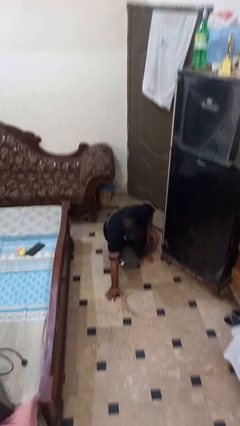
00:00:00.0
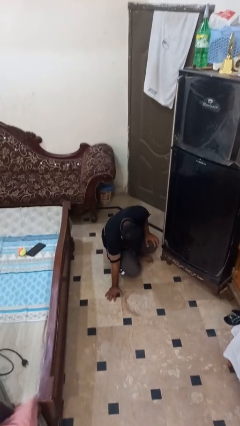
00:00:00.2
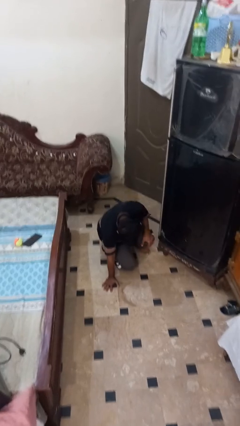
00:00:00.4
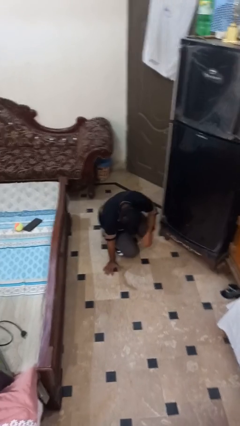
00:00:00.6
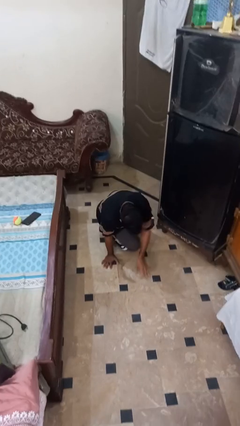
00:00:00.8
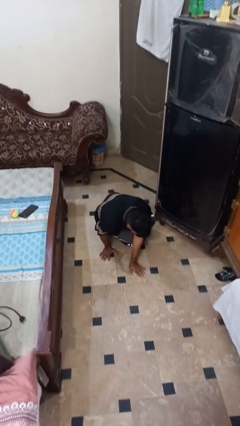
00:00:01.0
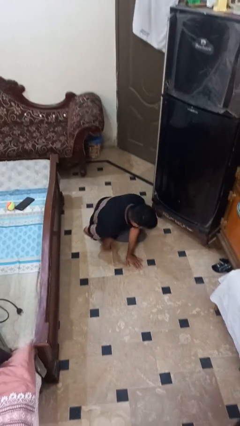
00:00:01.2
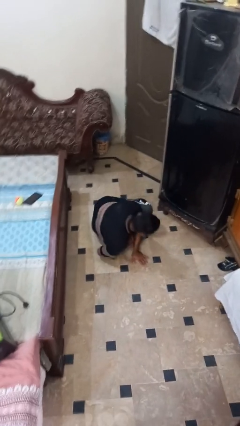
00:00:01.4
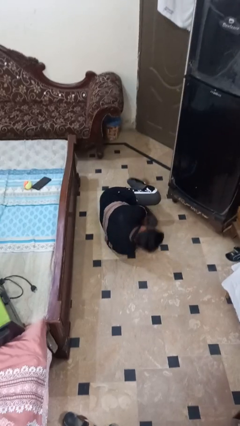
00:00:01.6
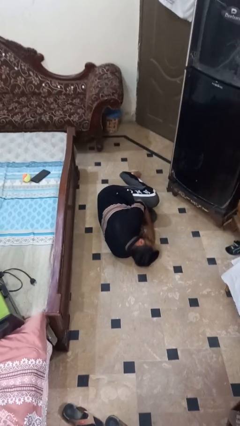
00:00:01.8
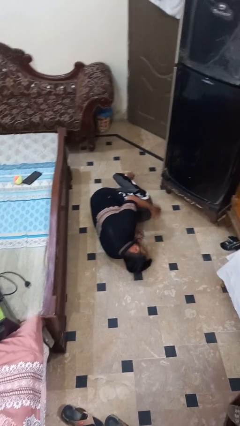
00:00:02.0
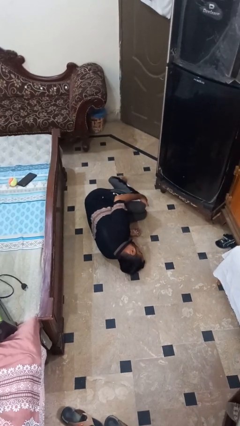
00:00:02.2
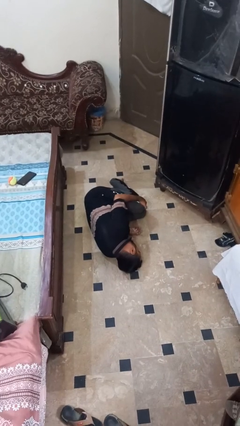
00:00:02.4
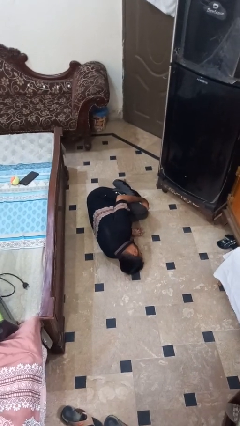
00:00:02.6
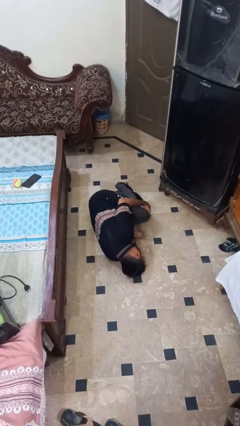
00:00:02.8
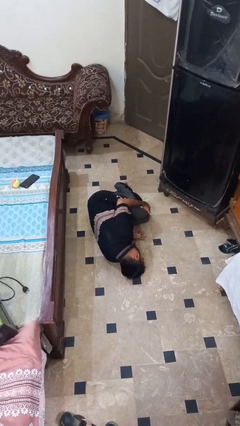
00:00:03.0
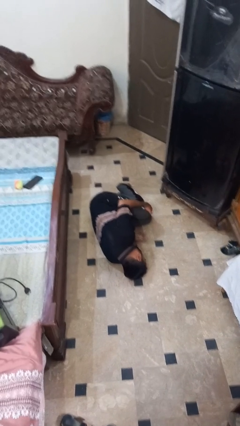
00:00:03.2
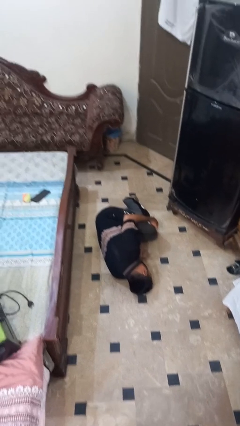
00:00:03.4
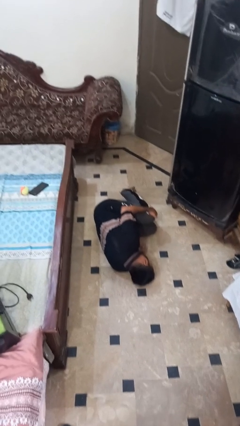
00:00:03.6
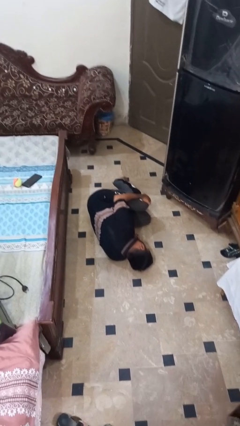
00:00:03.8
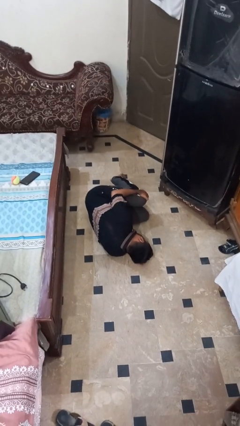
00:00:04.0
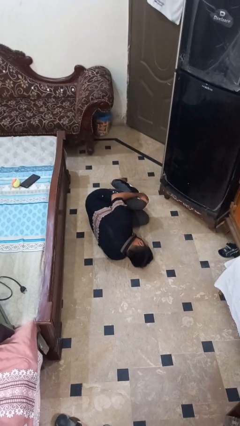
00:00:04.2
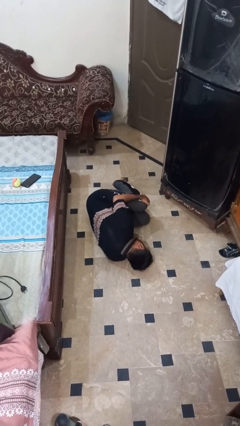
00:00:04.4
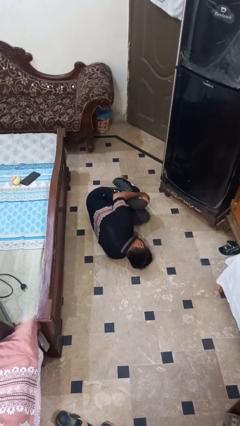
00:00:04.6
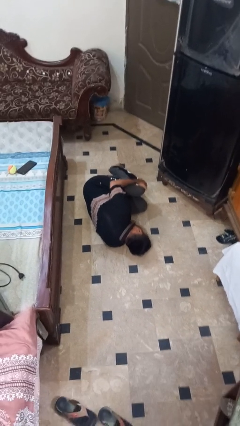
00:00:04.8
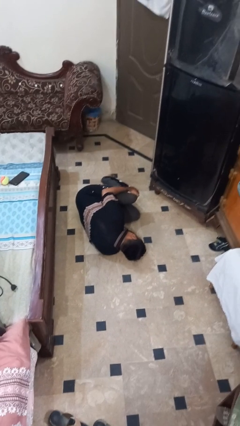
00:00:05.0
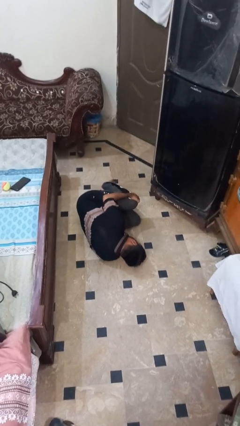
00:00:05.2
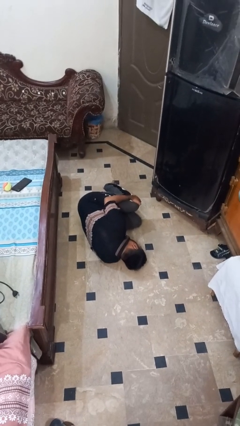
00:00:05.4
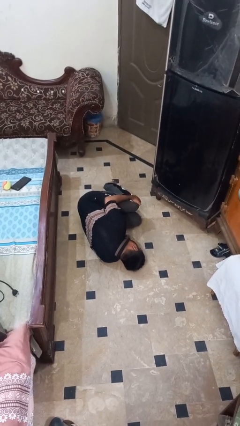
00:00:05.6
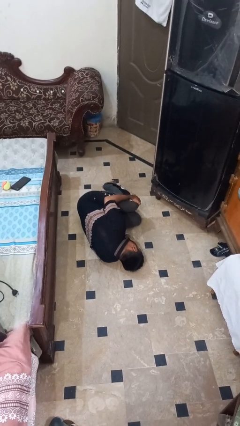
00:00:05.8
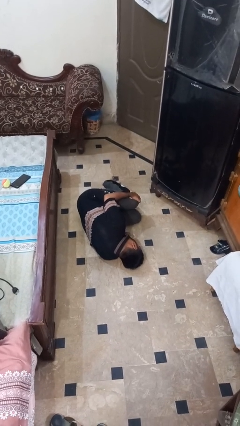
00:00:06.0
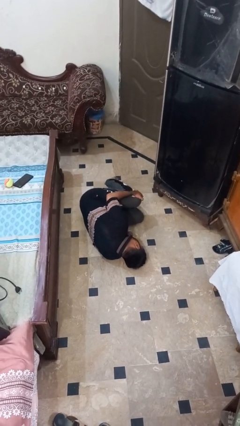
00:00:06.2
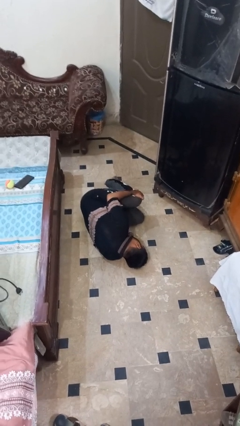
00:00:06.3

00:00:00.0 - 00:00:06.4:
person lies down on floor

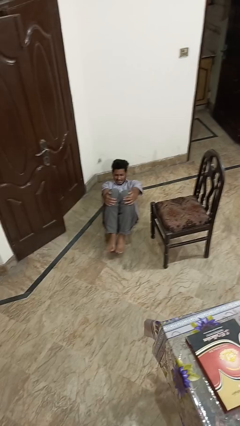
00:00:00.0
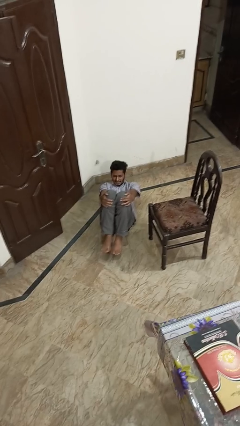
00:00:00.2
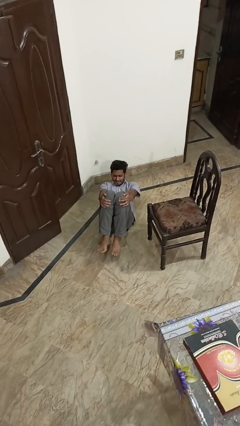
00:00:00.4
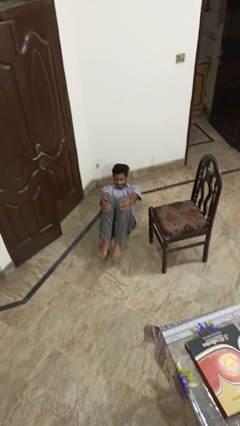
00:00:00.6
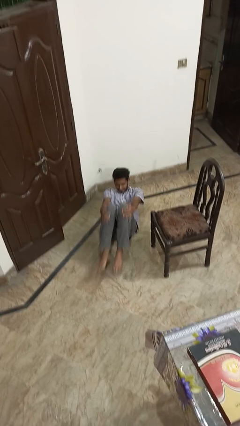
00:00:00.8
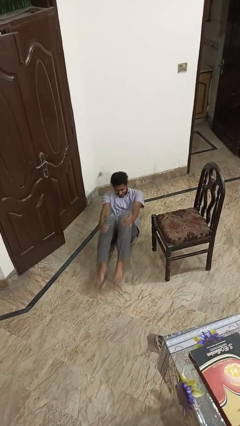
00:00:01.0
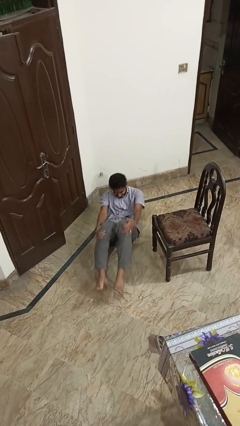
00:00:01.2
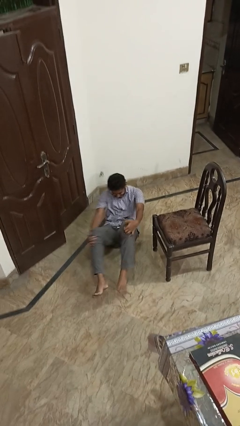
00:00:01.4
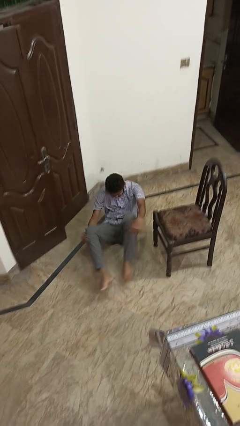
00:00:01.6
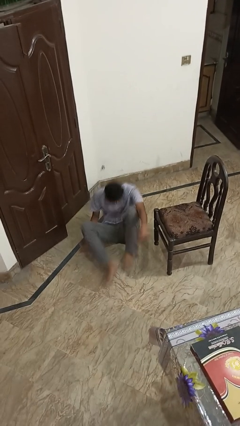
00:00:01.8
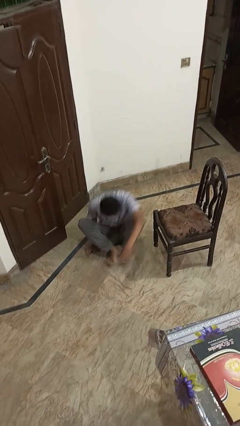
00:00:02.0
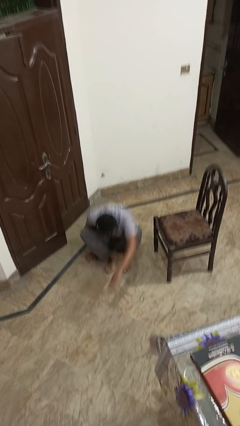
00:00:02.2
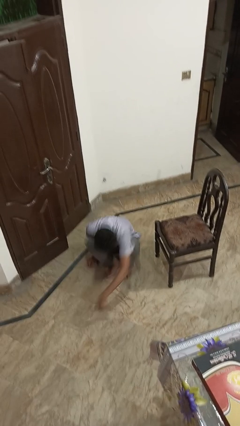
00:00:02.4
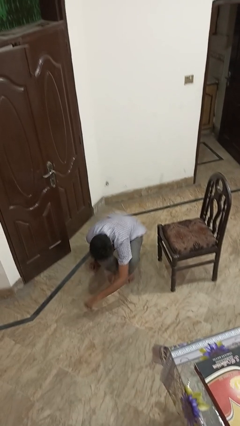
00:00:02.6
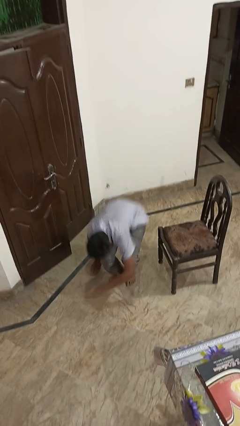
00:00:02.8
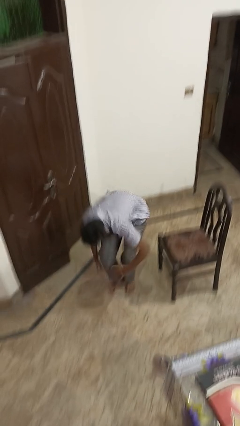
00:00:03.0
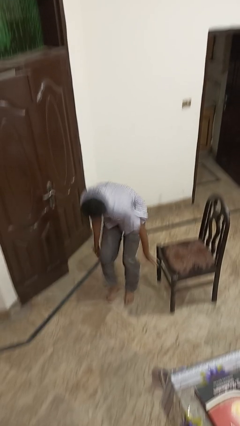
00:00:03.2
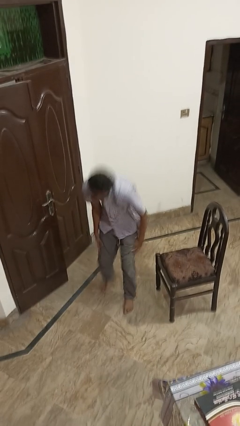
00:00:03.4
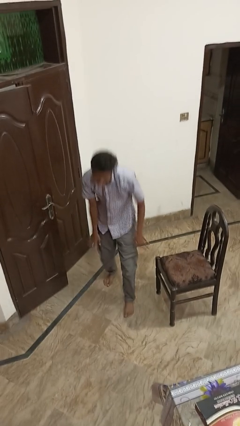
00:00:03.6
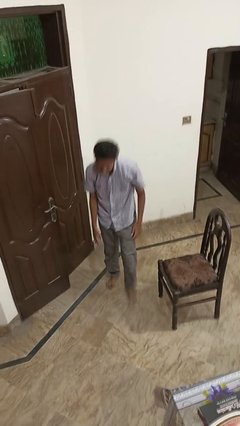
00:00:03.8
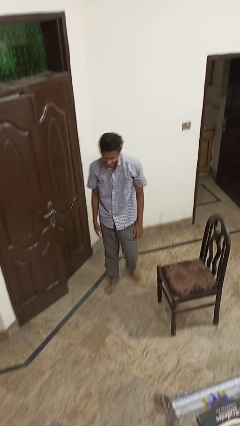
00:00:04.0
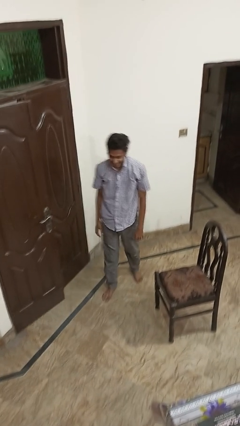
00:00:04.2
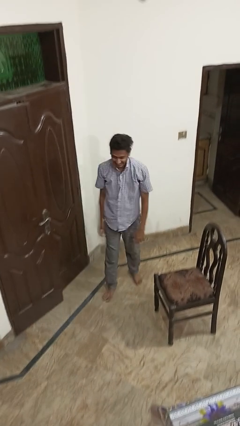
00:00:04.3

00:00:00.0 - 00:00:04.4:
person stands up from floor

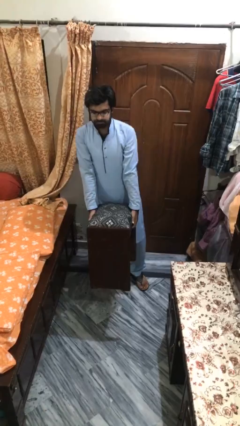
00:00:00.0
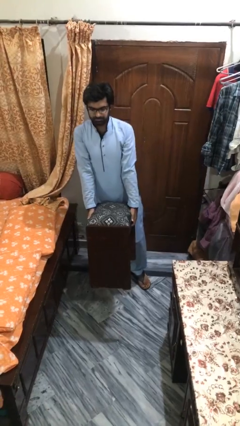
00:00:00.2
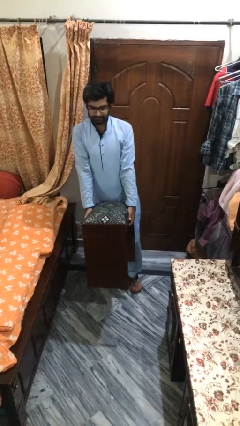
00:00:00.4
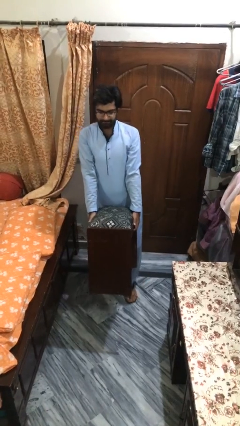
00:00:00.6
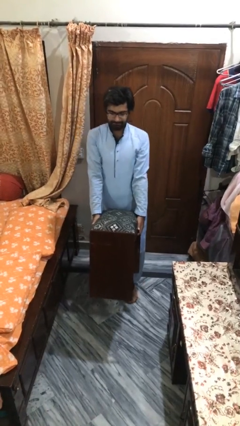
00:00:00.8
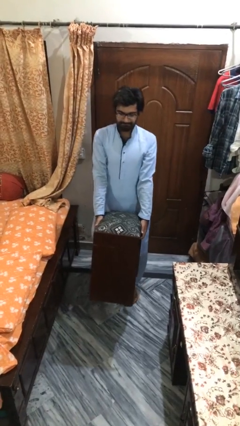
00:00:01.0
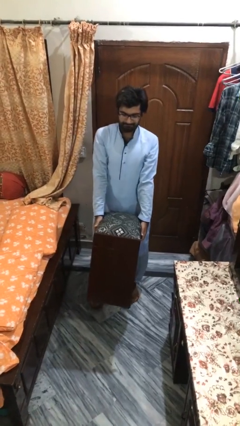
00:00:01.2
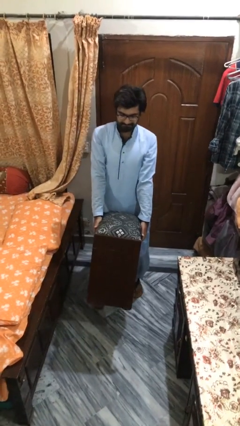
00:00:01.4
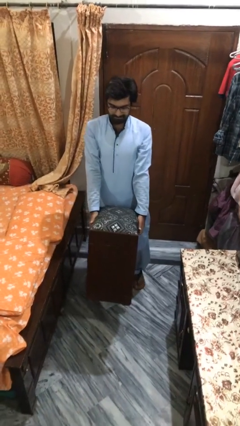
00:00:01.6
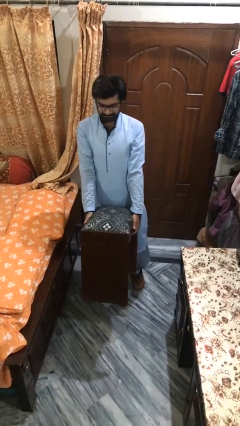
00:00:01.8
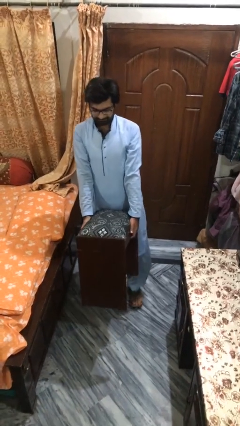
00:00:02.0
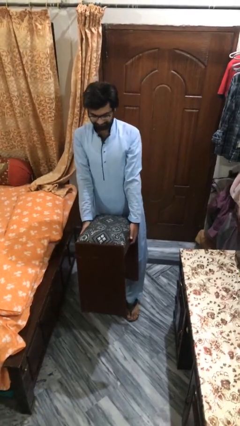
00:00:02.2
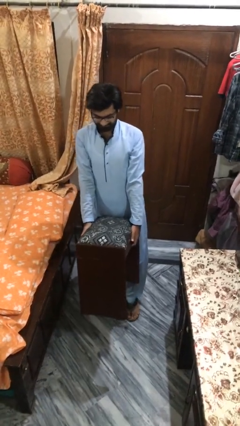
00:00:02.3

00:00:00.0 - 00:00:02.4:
person carries heavy object

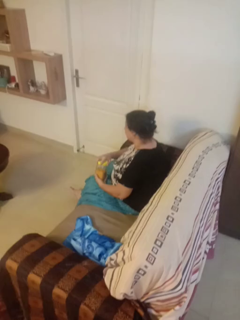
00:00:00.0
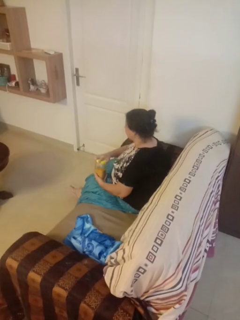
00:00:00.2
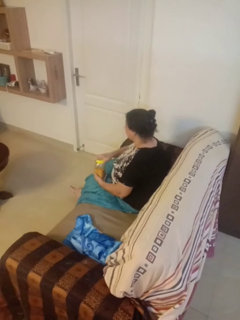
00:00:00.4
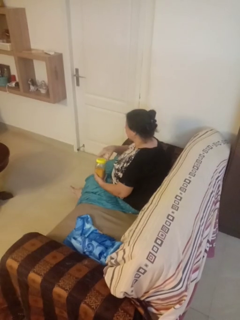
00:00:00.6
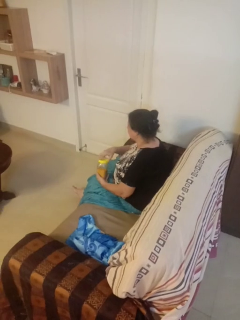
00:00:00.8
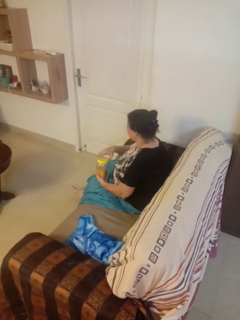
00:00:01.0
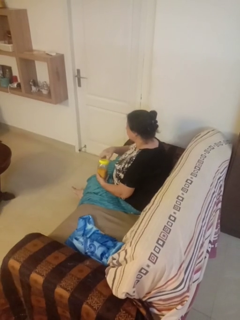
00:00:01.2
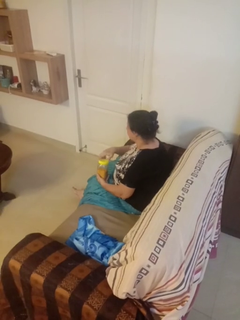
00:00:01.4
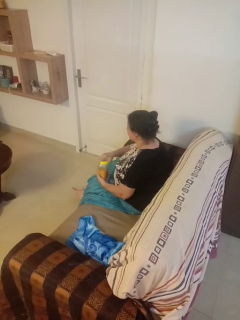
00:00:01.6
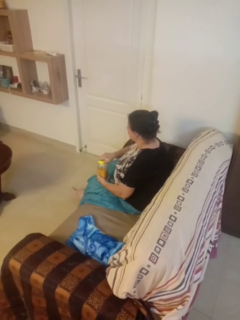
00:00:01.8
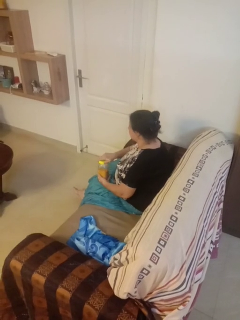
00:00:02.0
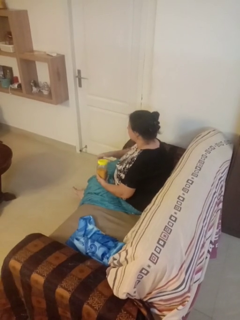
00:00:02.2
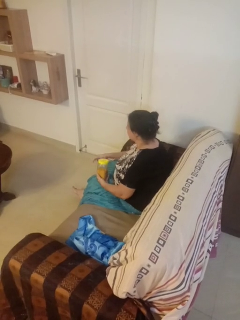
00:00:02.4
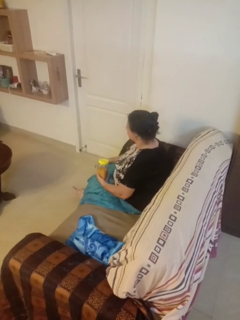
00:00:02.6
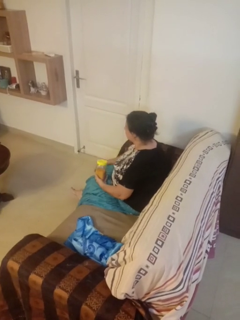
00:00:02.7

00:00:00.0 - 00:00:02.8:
person closes jar

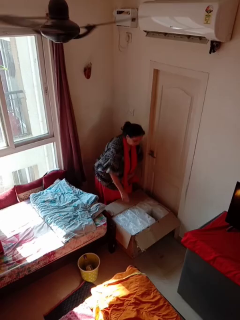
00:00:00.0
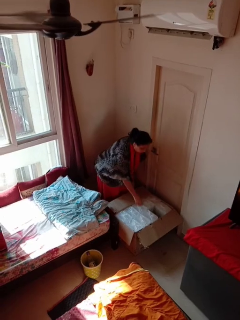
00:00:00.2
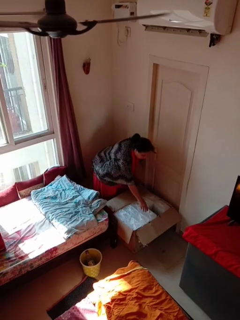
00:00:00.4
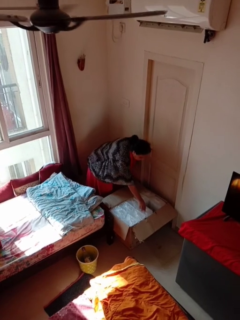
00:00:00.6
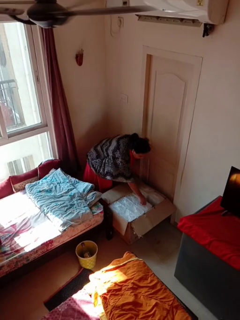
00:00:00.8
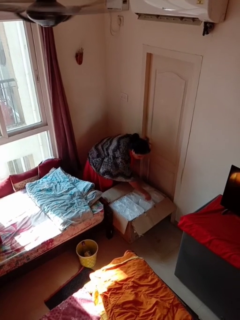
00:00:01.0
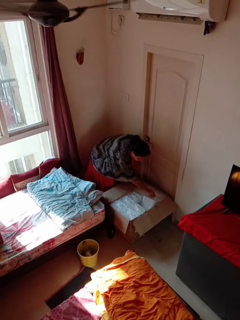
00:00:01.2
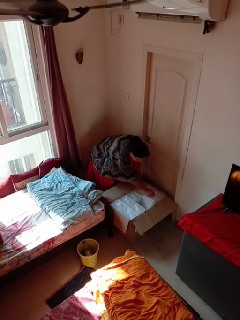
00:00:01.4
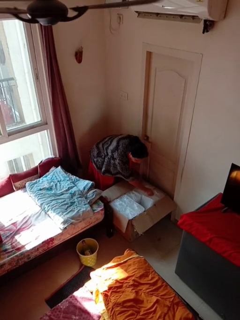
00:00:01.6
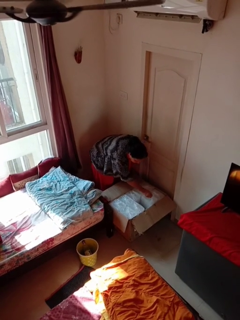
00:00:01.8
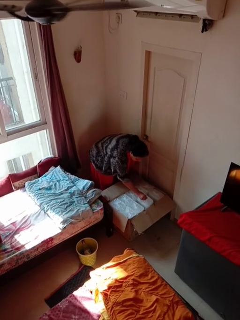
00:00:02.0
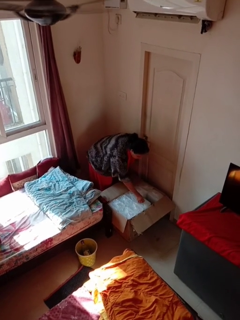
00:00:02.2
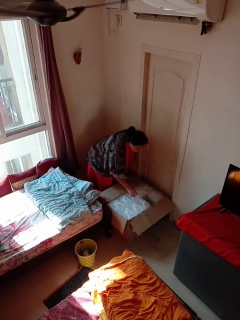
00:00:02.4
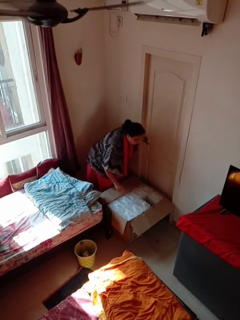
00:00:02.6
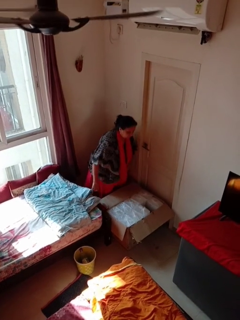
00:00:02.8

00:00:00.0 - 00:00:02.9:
person searches in box
